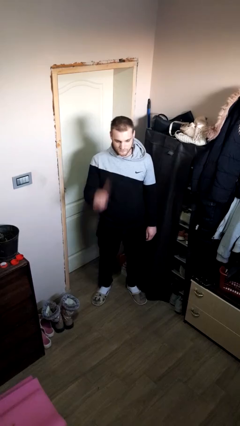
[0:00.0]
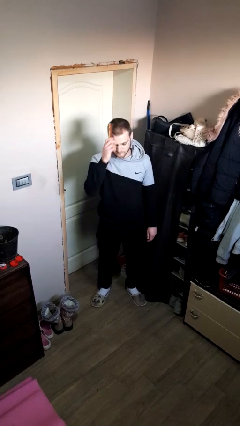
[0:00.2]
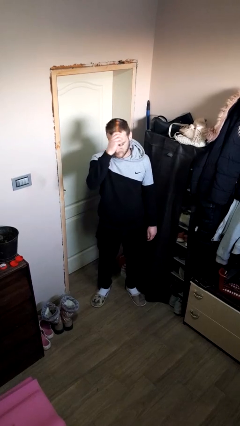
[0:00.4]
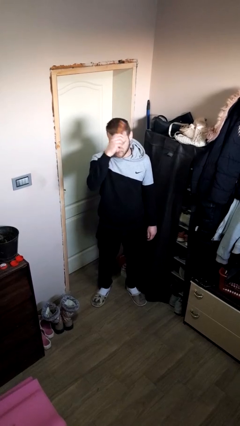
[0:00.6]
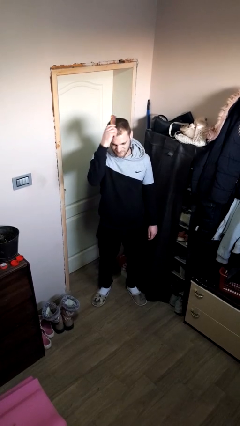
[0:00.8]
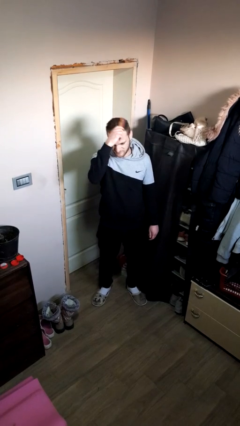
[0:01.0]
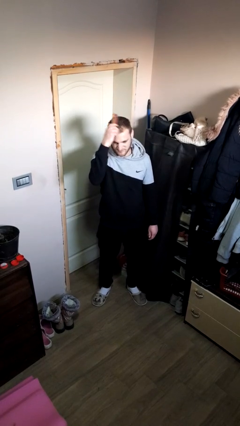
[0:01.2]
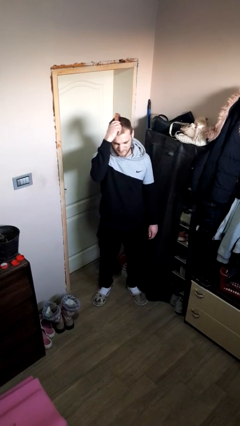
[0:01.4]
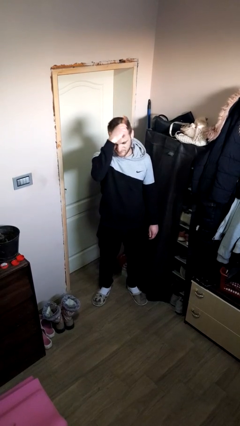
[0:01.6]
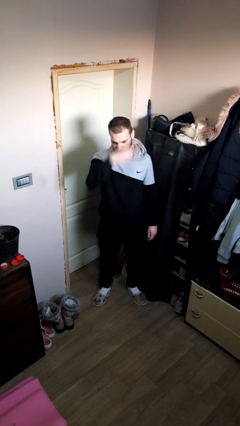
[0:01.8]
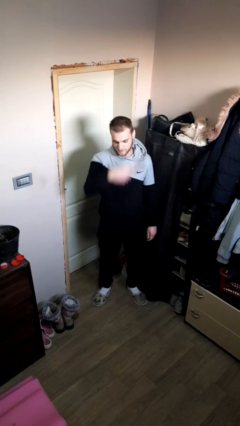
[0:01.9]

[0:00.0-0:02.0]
person brushes hair

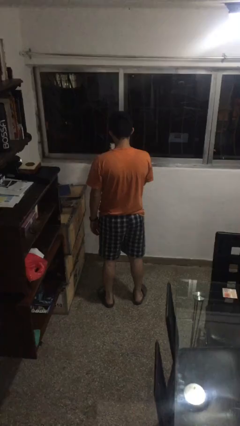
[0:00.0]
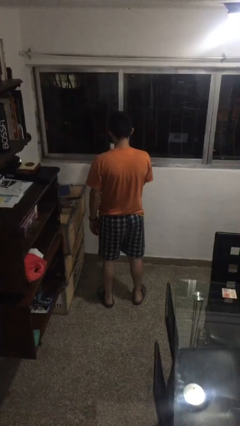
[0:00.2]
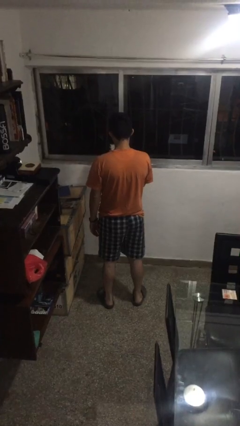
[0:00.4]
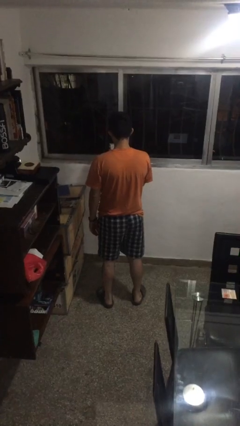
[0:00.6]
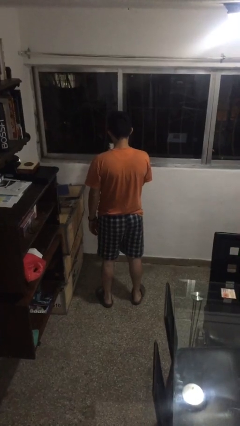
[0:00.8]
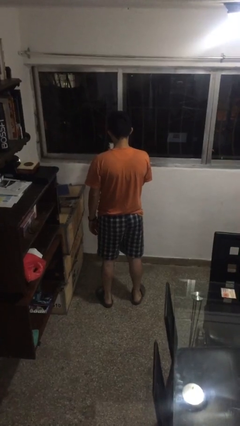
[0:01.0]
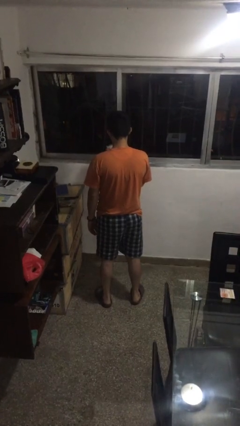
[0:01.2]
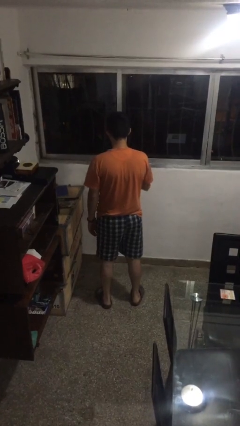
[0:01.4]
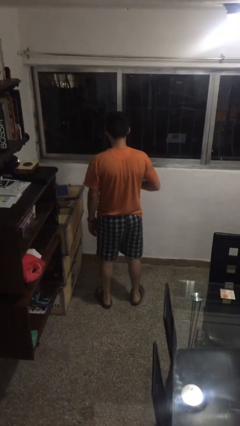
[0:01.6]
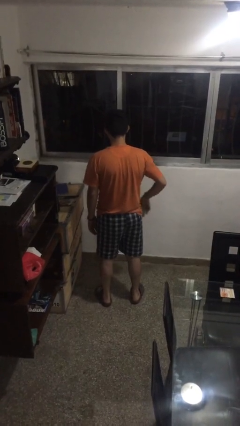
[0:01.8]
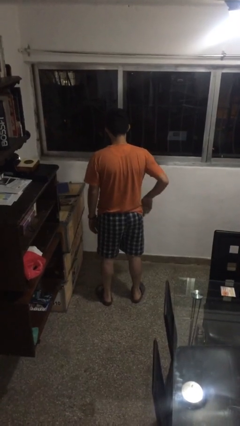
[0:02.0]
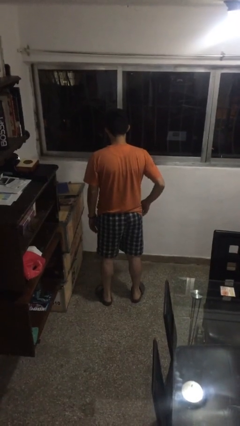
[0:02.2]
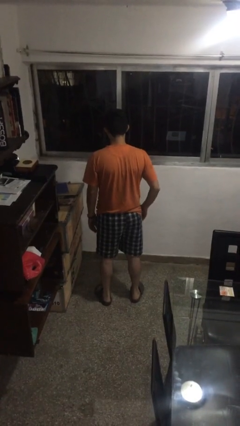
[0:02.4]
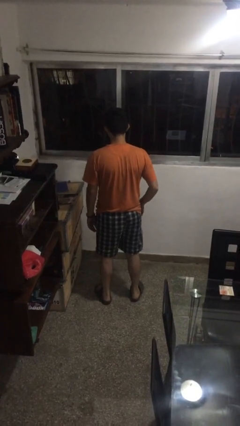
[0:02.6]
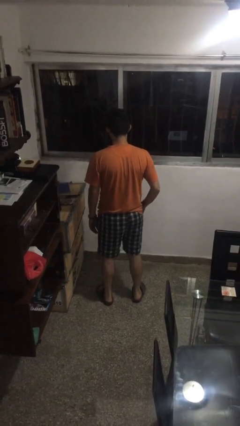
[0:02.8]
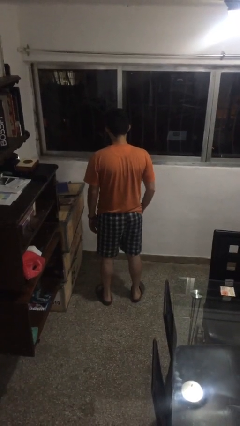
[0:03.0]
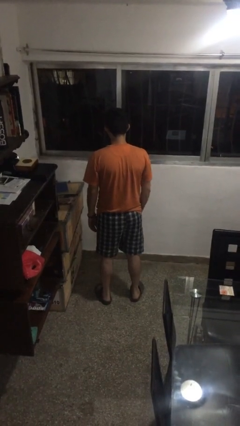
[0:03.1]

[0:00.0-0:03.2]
person puts phone into pocket

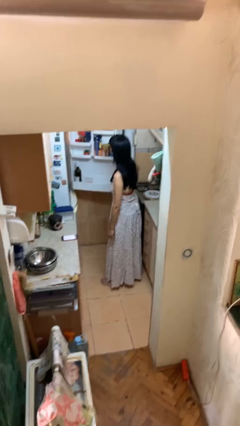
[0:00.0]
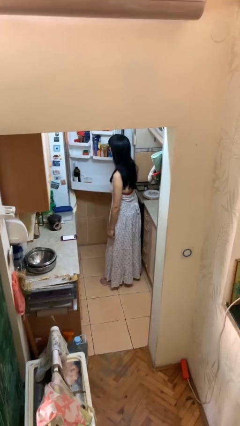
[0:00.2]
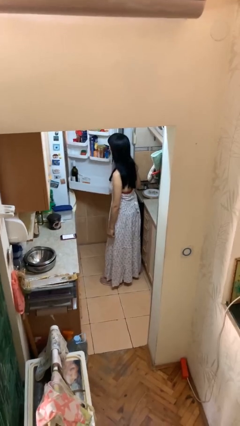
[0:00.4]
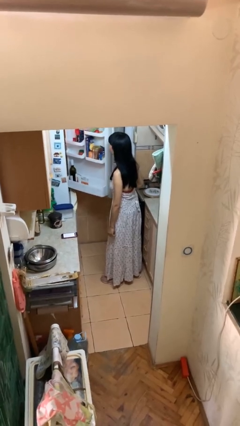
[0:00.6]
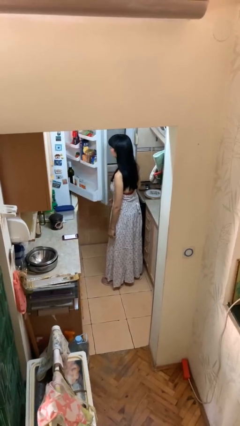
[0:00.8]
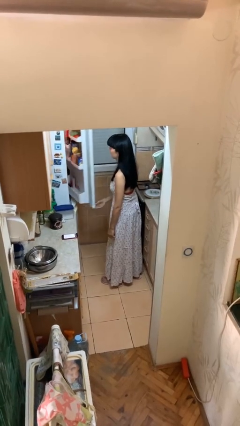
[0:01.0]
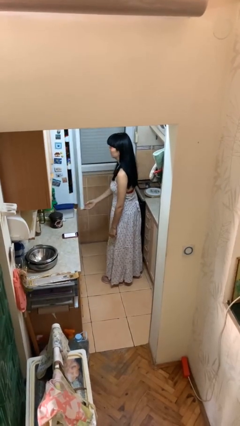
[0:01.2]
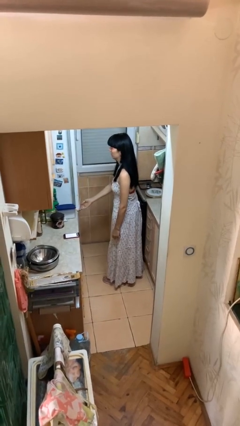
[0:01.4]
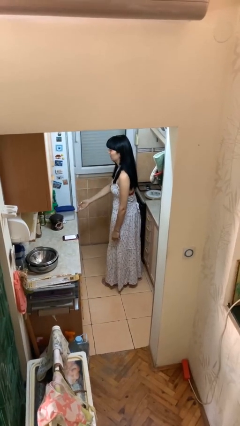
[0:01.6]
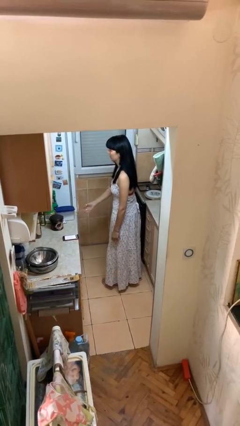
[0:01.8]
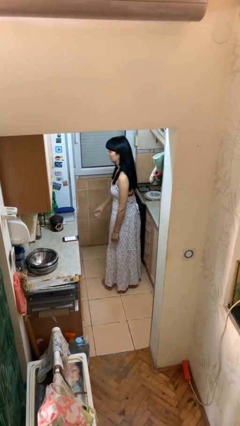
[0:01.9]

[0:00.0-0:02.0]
person closes refrigerator

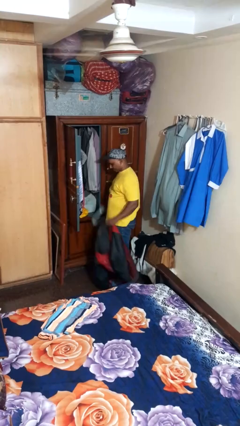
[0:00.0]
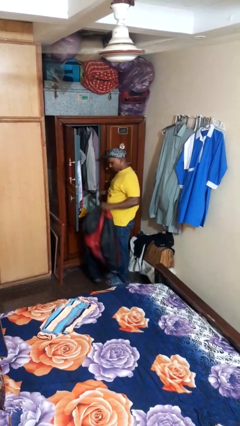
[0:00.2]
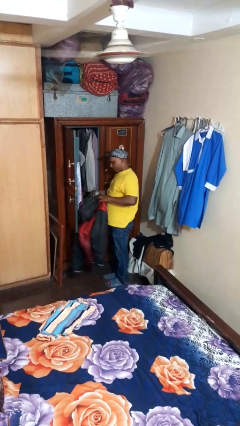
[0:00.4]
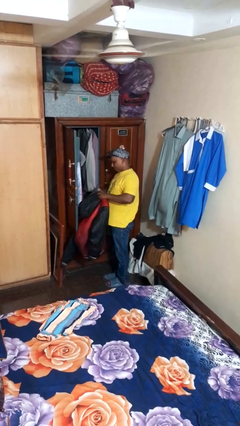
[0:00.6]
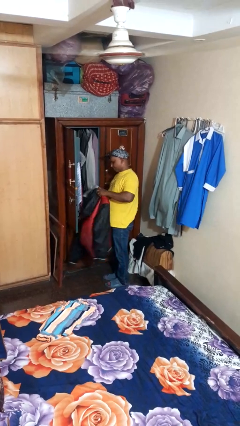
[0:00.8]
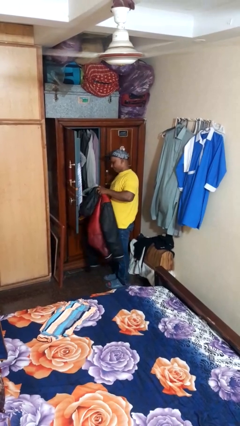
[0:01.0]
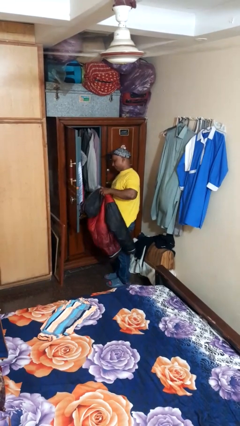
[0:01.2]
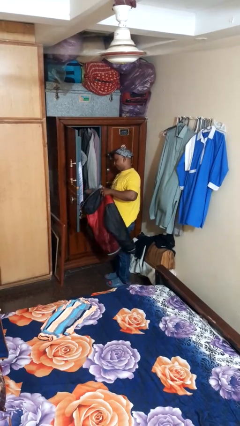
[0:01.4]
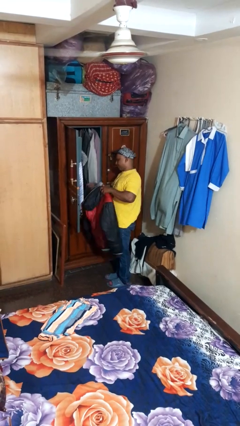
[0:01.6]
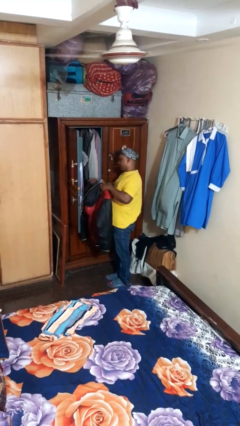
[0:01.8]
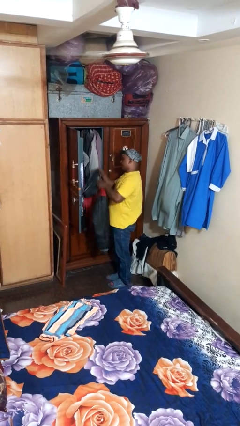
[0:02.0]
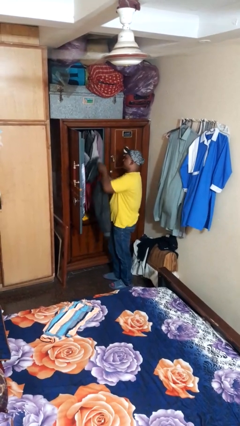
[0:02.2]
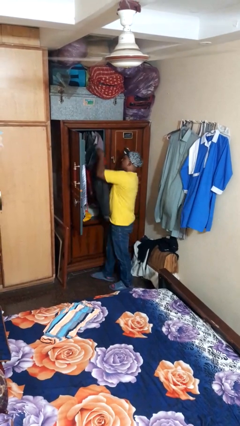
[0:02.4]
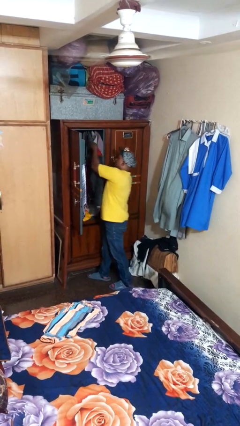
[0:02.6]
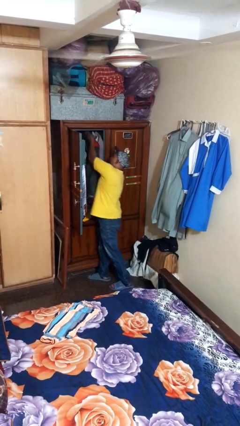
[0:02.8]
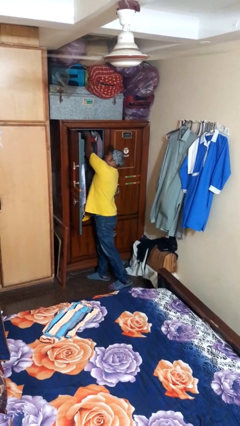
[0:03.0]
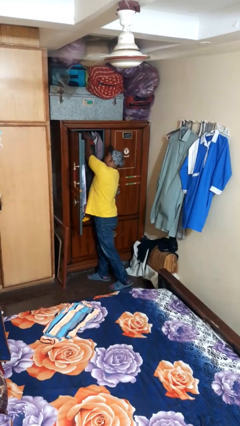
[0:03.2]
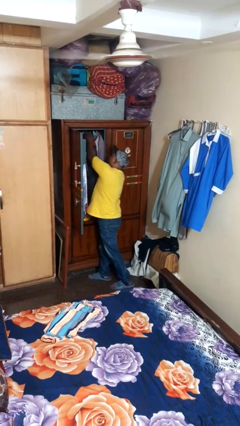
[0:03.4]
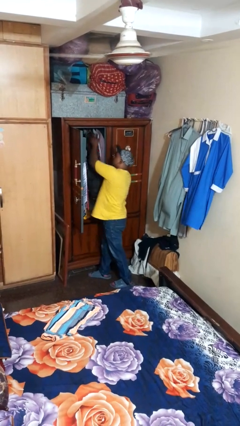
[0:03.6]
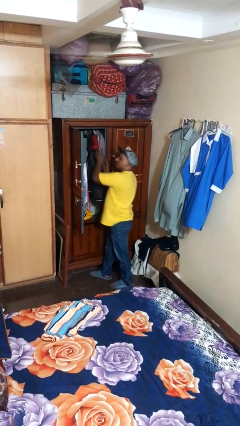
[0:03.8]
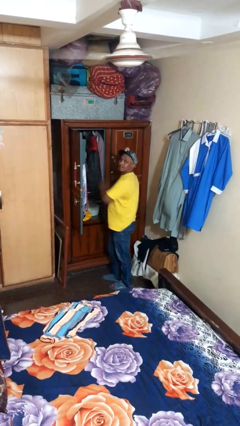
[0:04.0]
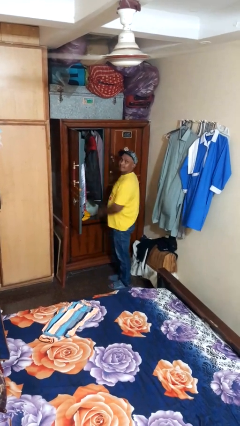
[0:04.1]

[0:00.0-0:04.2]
person puts clothes into closet

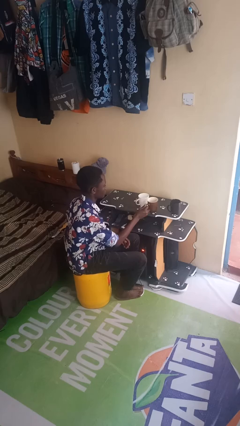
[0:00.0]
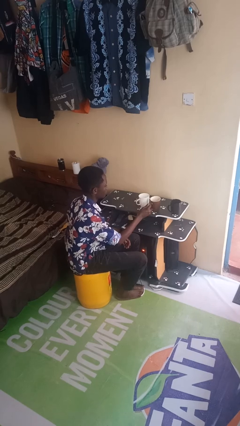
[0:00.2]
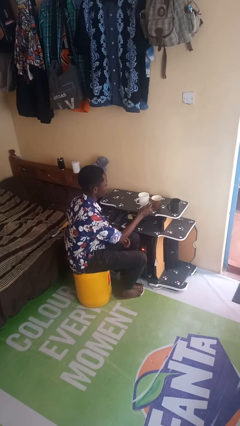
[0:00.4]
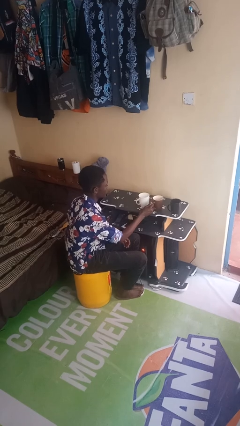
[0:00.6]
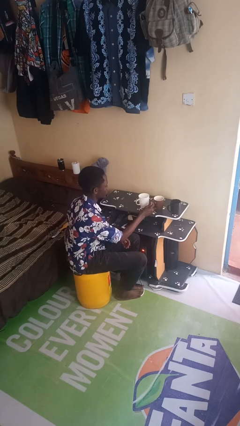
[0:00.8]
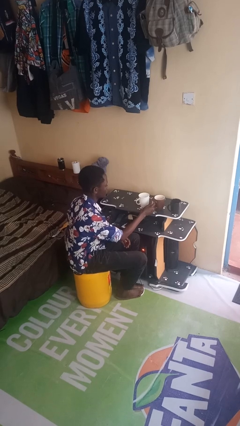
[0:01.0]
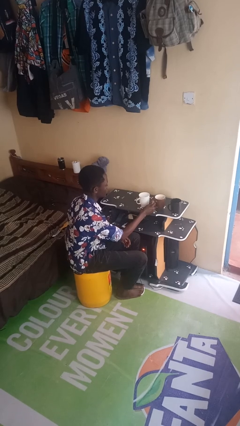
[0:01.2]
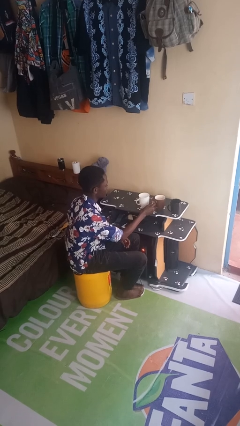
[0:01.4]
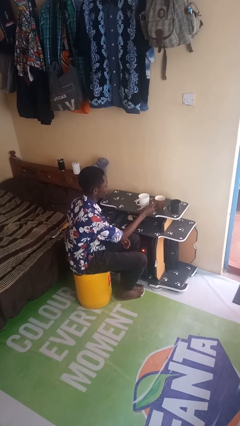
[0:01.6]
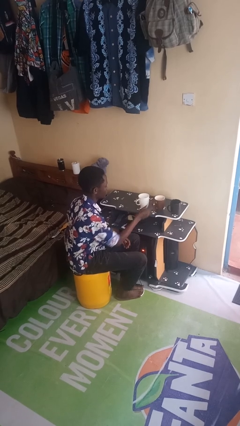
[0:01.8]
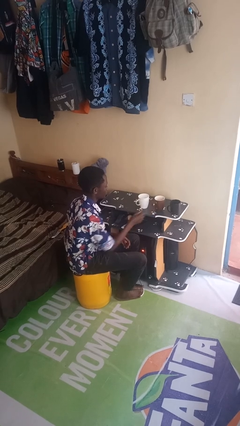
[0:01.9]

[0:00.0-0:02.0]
person puts down object on table

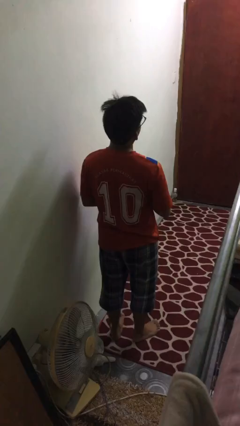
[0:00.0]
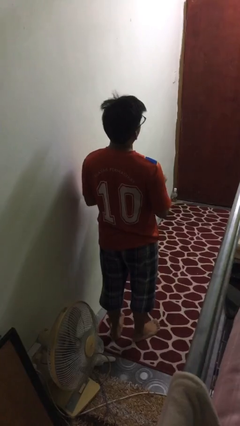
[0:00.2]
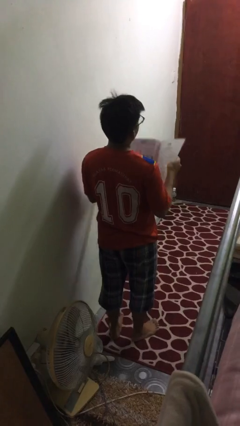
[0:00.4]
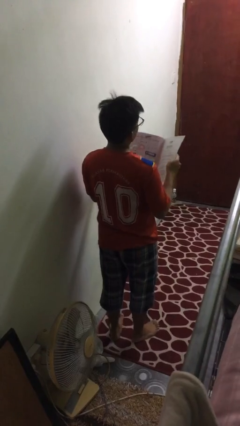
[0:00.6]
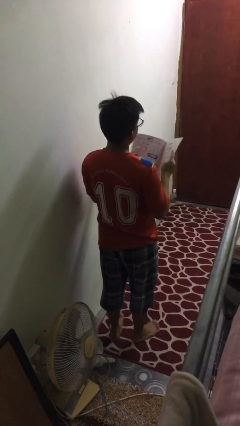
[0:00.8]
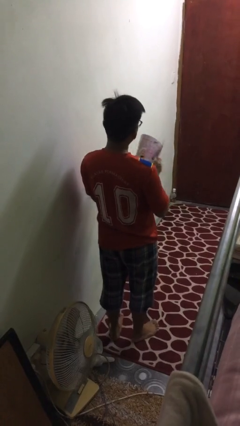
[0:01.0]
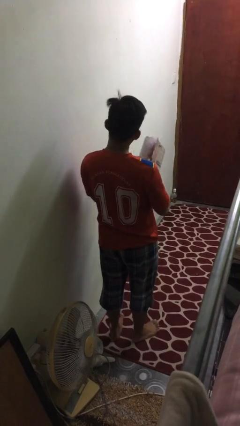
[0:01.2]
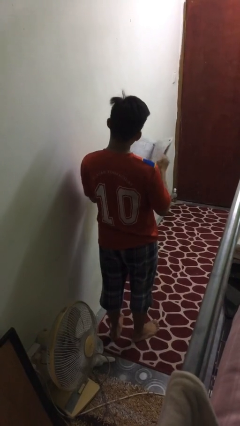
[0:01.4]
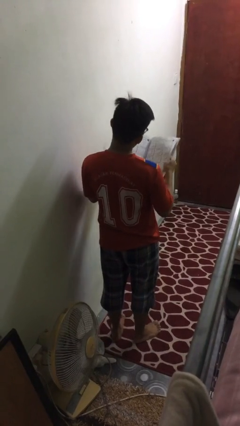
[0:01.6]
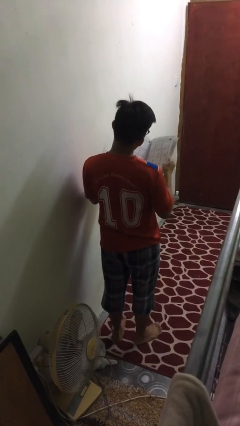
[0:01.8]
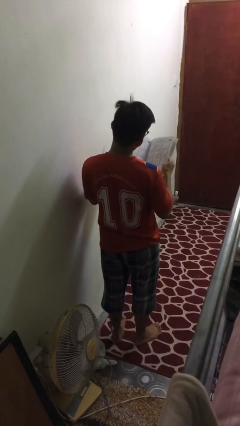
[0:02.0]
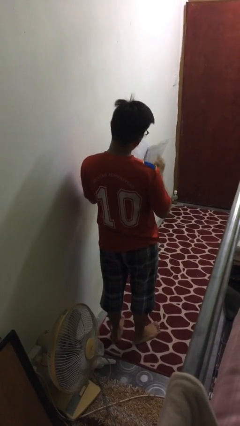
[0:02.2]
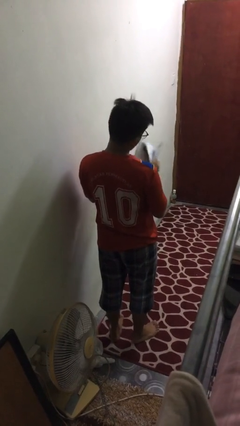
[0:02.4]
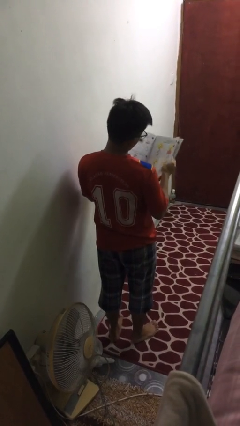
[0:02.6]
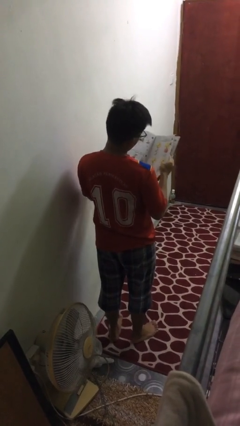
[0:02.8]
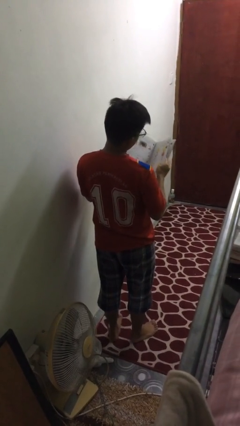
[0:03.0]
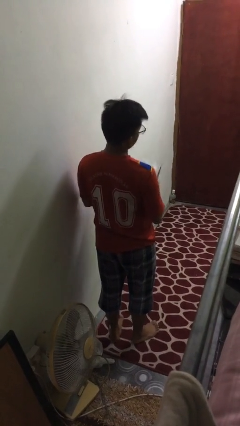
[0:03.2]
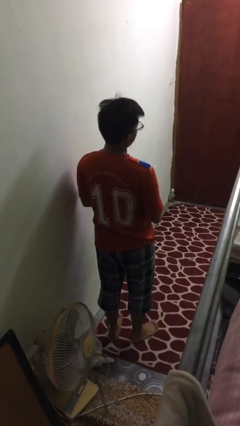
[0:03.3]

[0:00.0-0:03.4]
person reads magazine

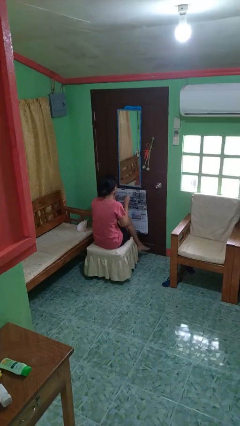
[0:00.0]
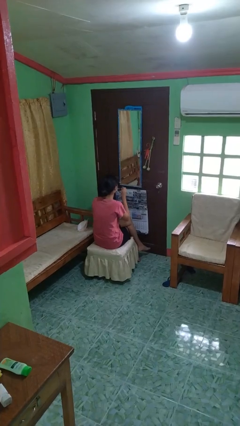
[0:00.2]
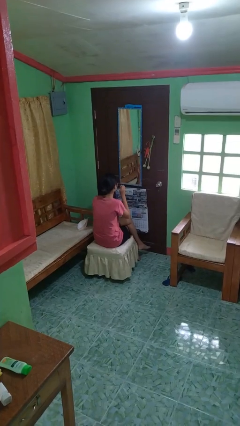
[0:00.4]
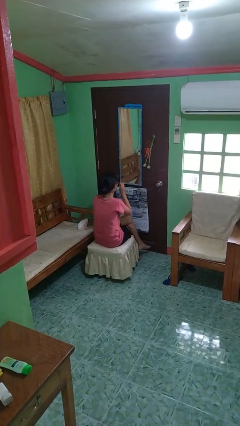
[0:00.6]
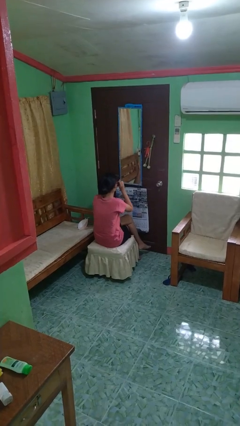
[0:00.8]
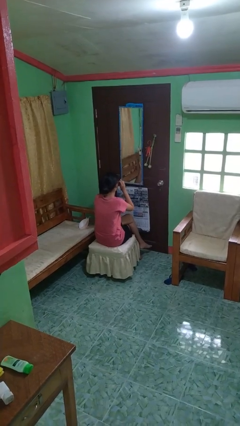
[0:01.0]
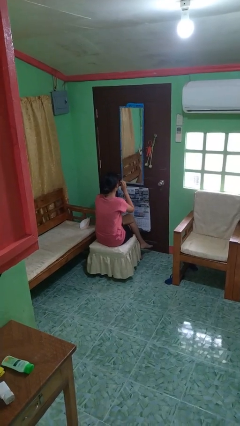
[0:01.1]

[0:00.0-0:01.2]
person puts on sunglasses
